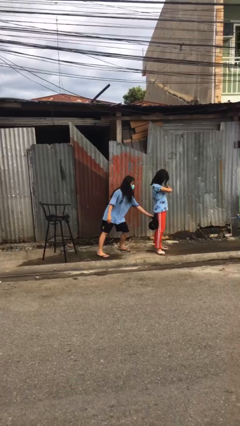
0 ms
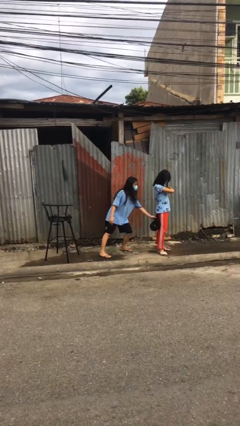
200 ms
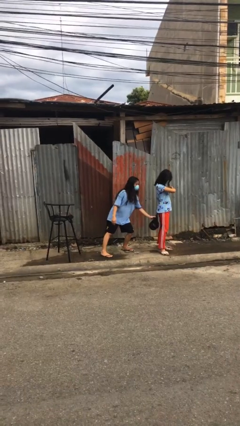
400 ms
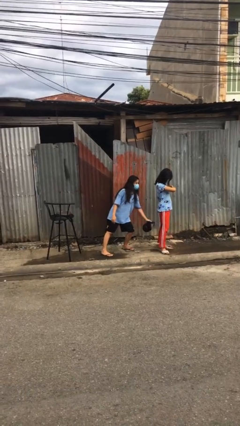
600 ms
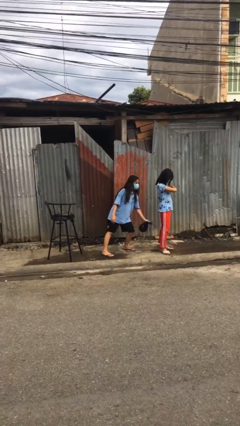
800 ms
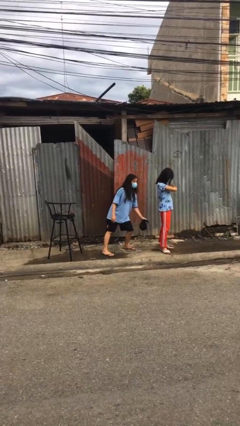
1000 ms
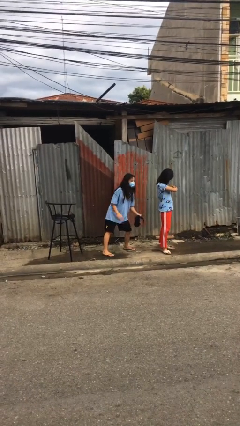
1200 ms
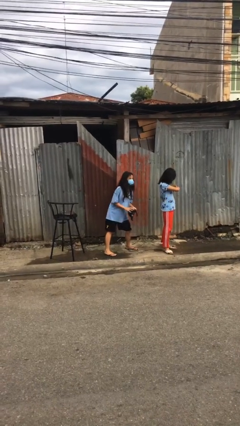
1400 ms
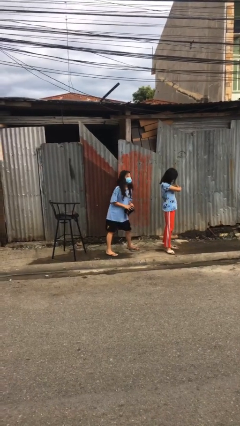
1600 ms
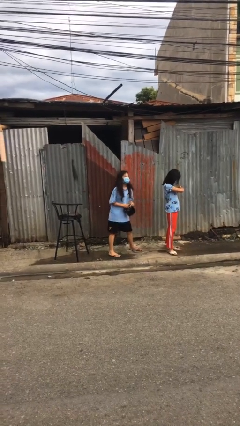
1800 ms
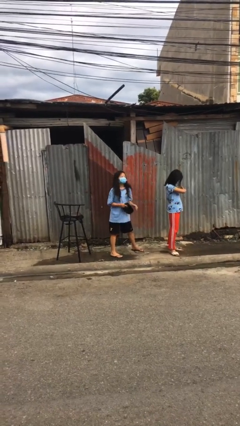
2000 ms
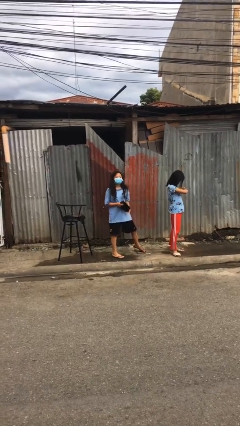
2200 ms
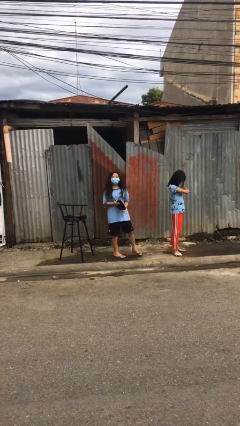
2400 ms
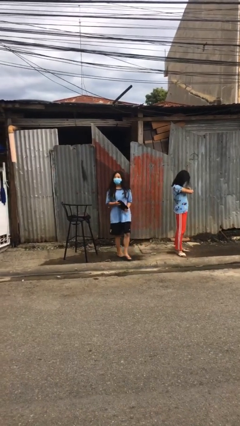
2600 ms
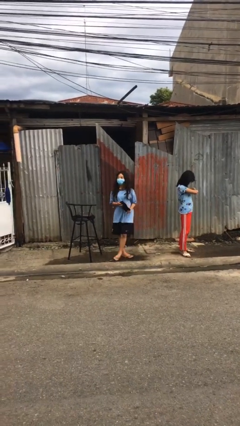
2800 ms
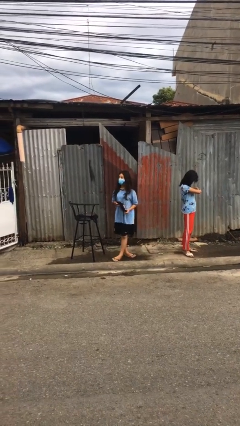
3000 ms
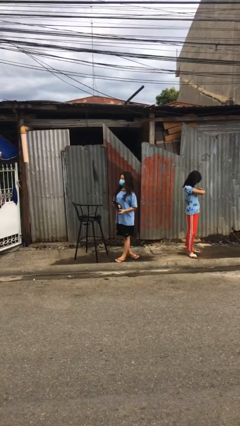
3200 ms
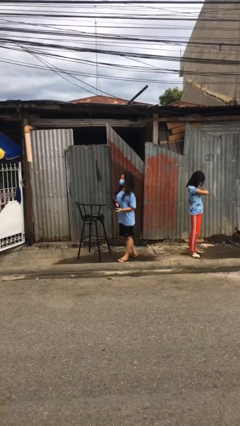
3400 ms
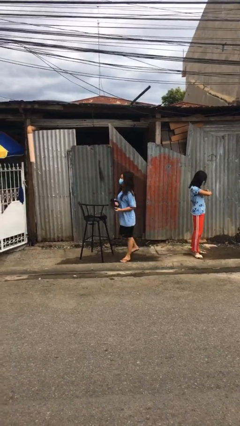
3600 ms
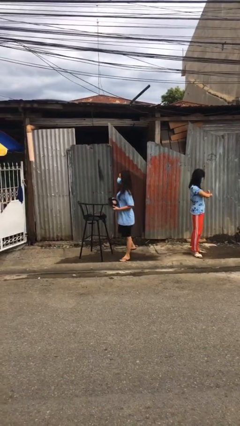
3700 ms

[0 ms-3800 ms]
person steals object from person

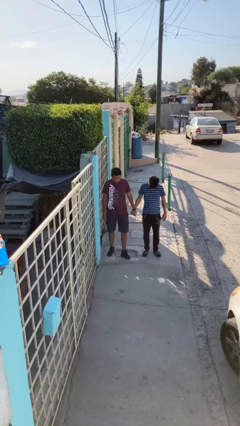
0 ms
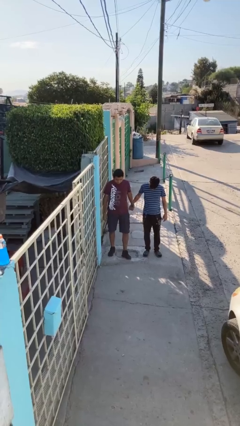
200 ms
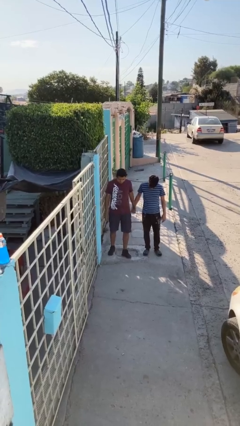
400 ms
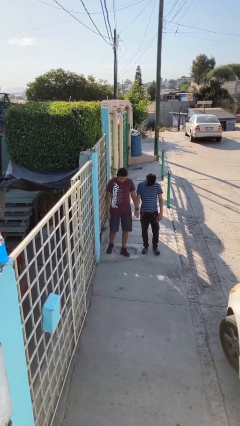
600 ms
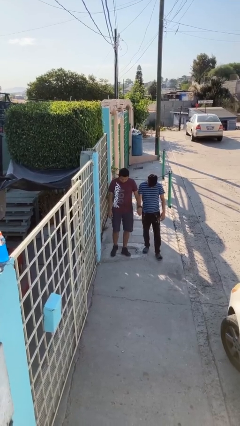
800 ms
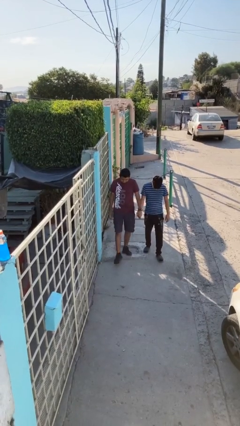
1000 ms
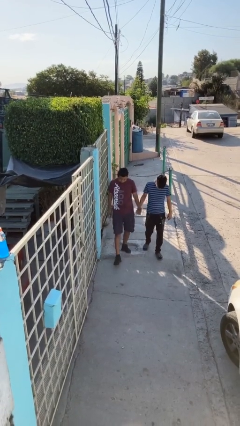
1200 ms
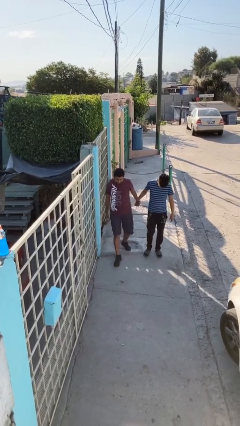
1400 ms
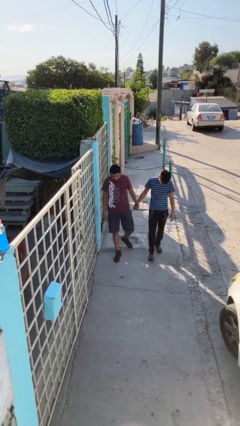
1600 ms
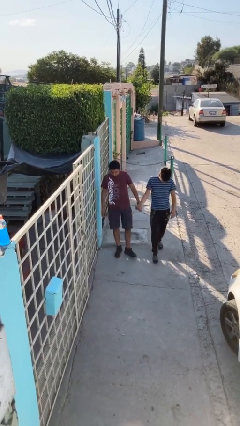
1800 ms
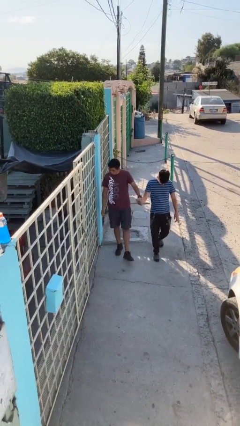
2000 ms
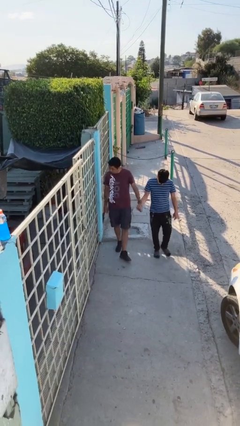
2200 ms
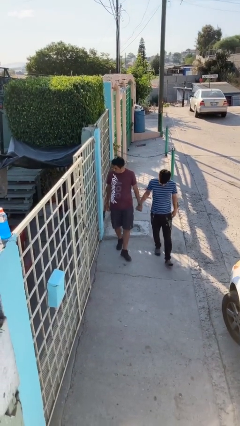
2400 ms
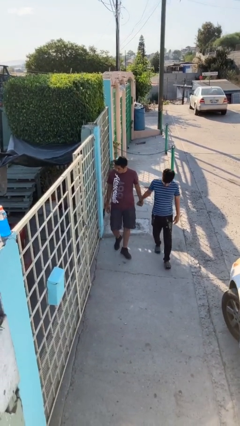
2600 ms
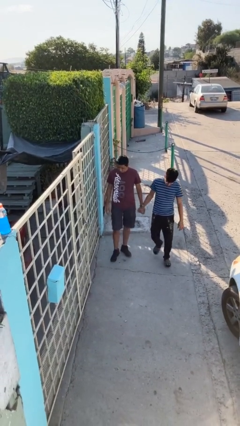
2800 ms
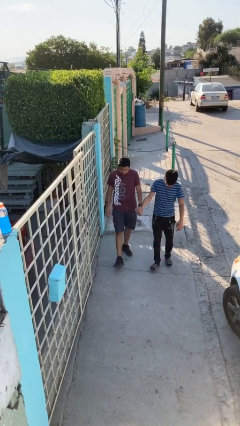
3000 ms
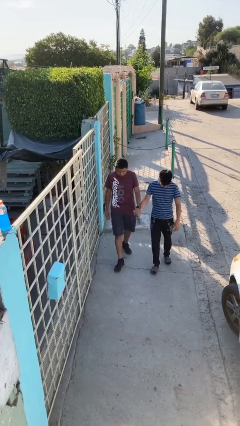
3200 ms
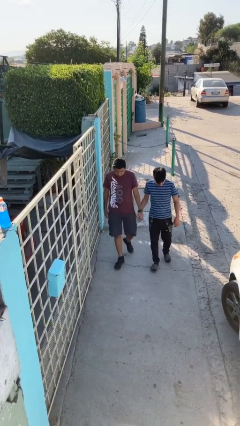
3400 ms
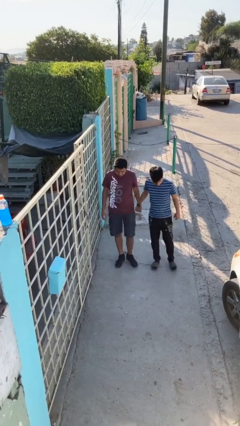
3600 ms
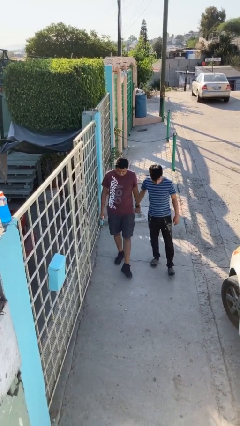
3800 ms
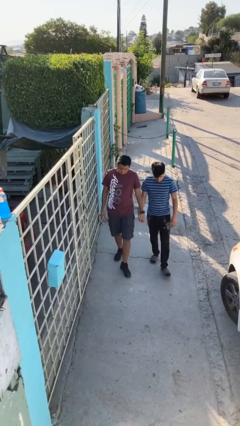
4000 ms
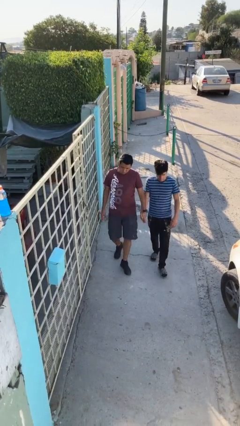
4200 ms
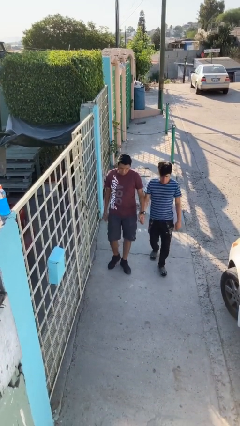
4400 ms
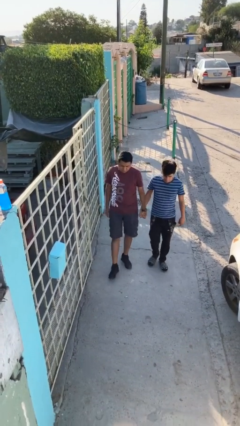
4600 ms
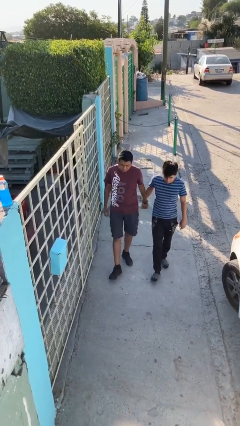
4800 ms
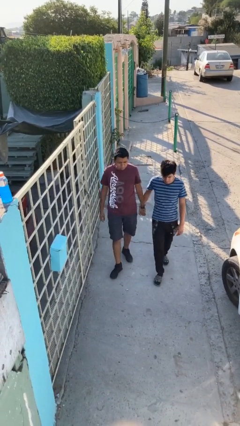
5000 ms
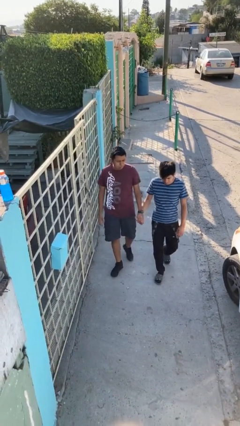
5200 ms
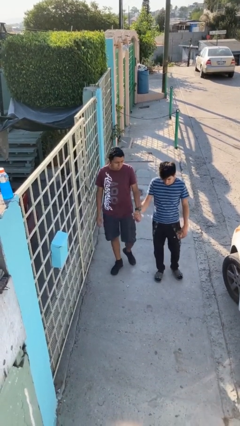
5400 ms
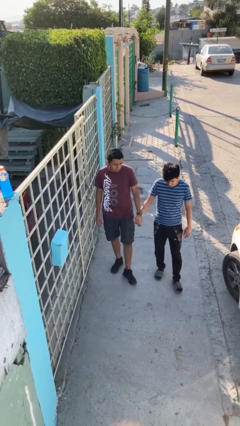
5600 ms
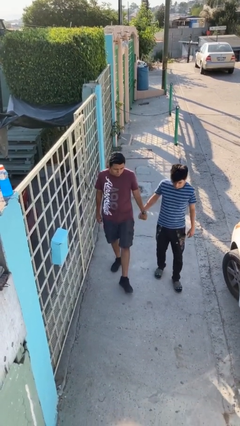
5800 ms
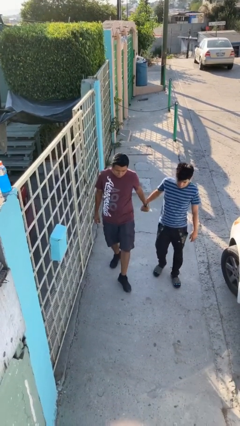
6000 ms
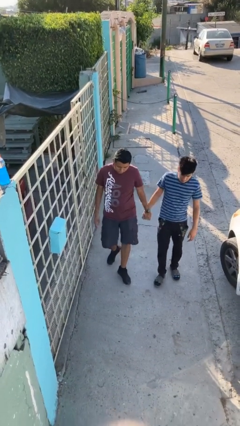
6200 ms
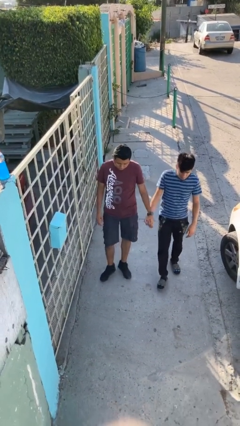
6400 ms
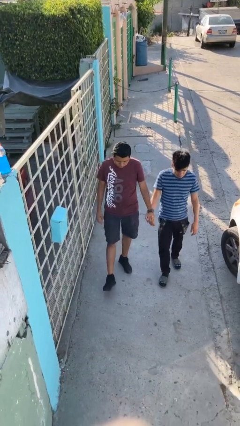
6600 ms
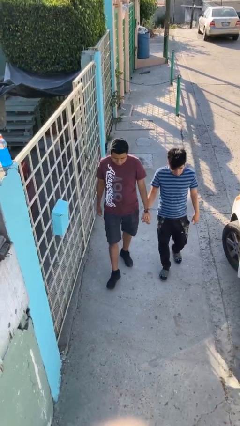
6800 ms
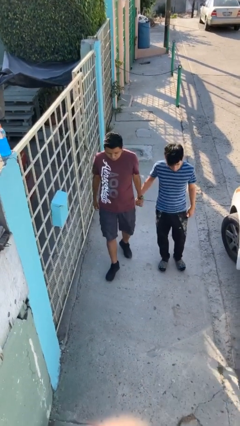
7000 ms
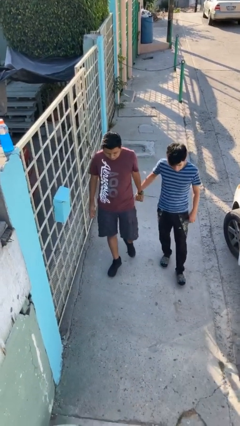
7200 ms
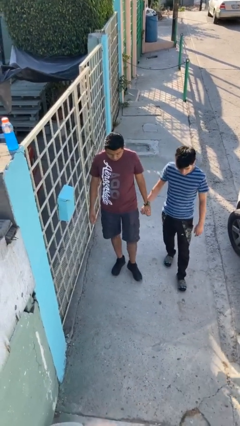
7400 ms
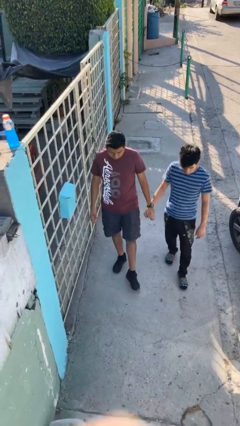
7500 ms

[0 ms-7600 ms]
person holds hand

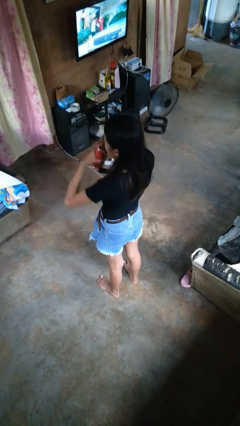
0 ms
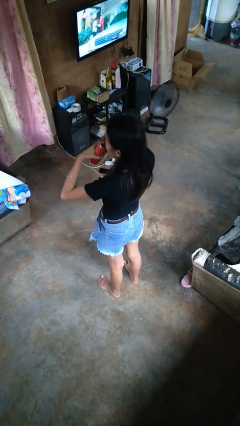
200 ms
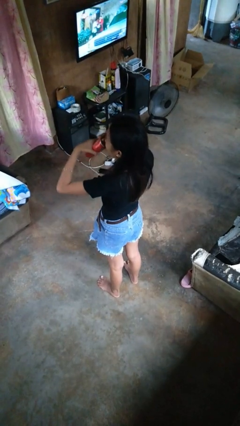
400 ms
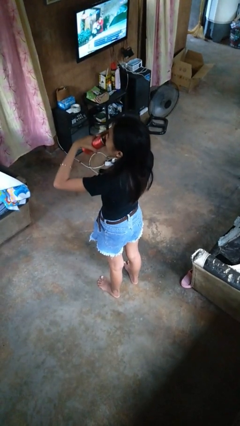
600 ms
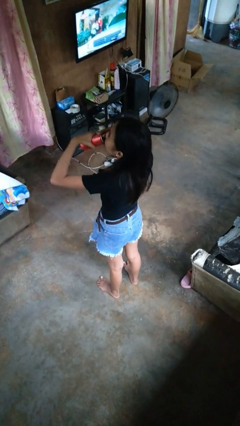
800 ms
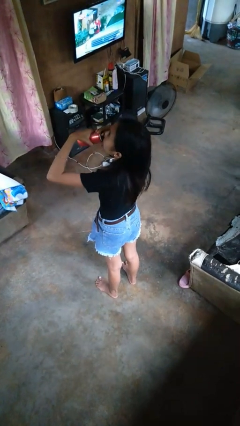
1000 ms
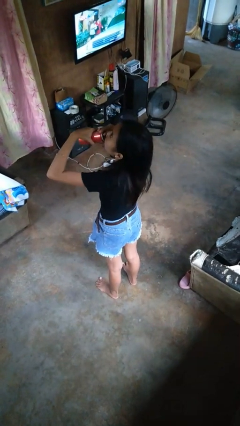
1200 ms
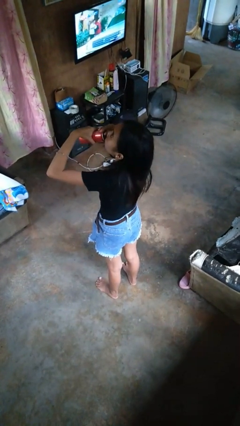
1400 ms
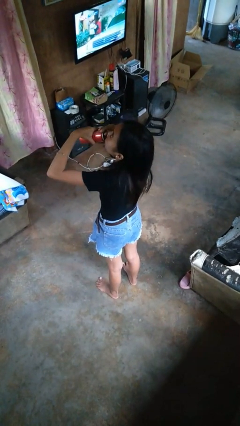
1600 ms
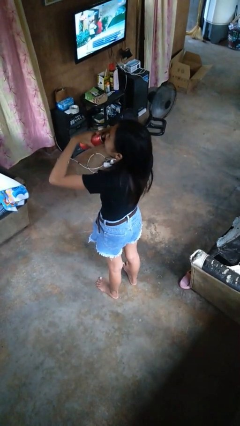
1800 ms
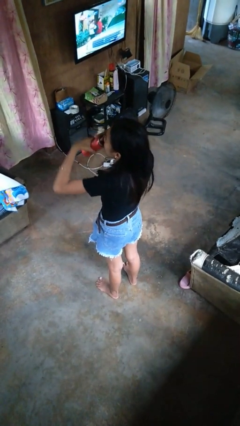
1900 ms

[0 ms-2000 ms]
person drinks from beverage can

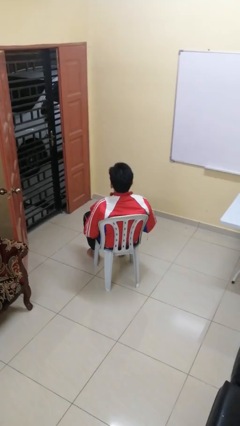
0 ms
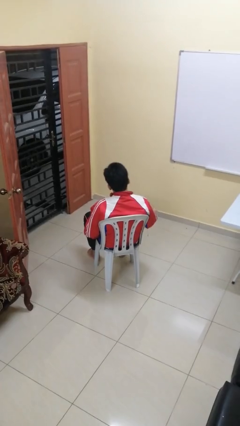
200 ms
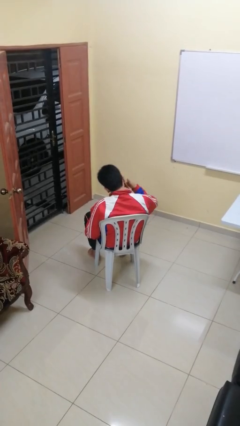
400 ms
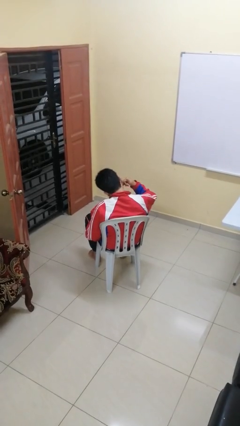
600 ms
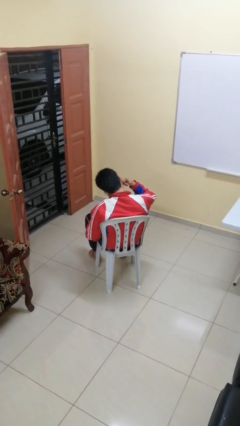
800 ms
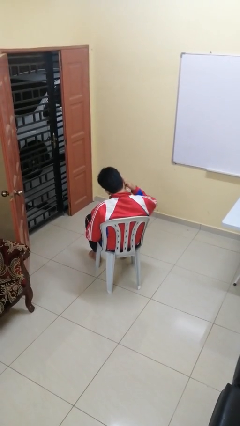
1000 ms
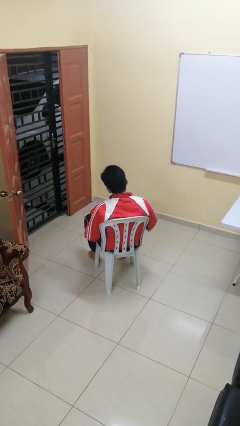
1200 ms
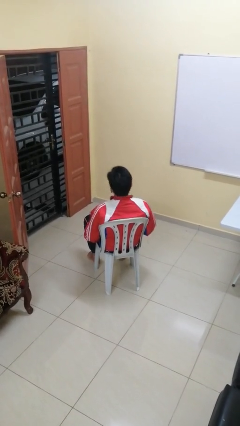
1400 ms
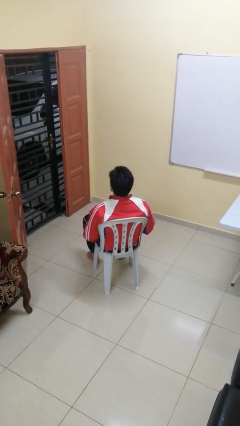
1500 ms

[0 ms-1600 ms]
person gestures call me

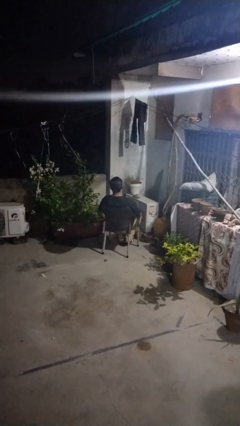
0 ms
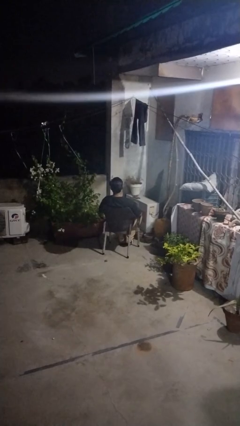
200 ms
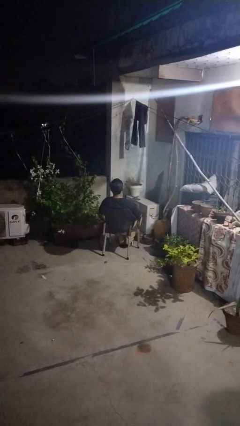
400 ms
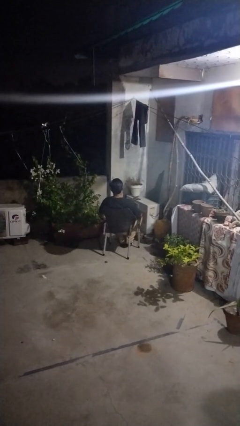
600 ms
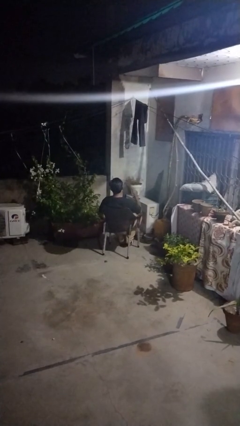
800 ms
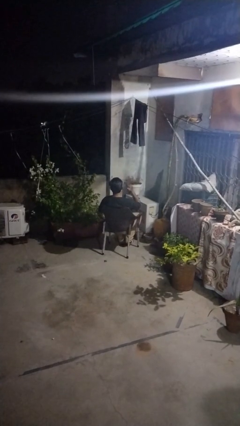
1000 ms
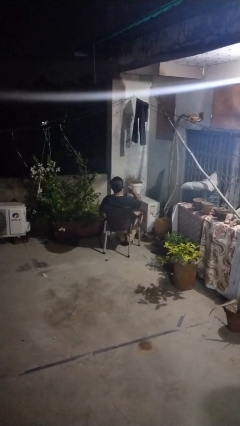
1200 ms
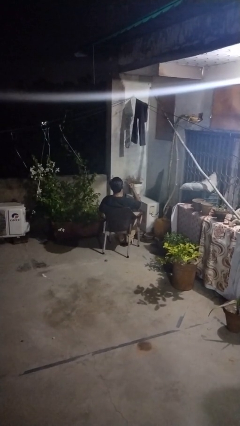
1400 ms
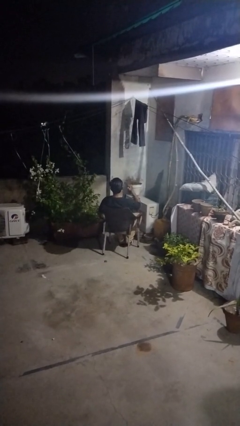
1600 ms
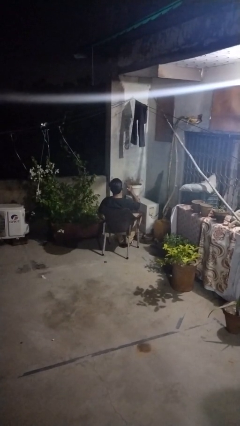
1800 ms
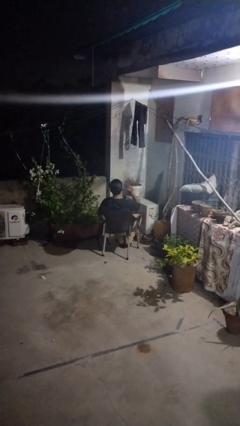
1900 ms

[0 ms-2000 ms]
person gestures behind me

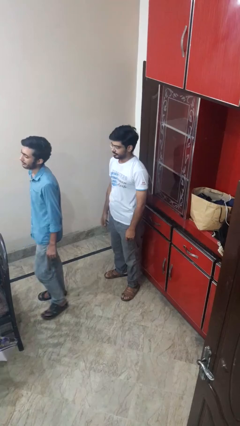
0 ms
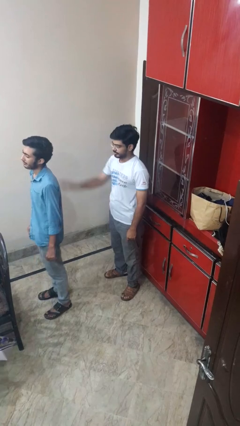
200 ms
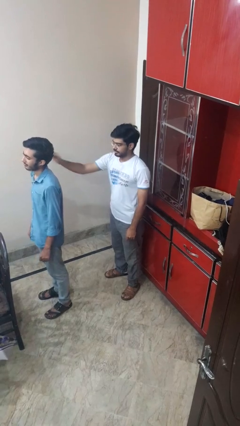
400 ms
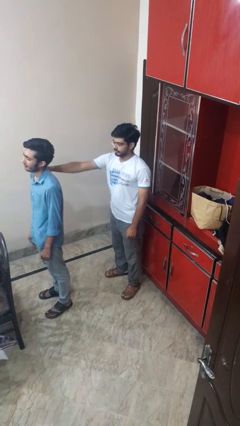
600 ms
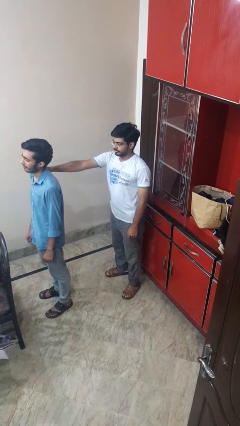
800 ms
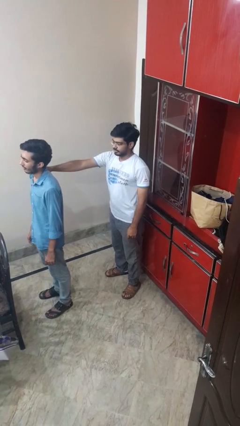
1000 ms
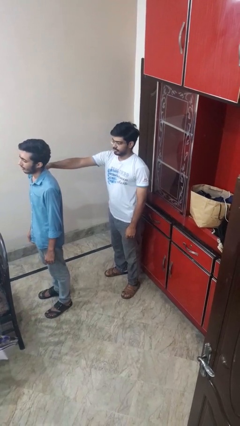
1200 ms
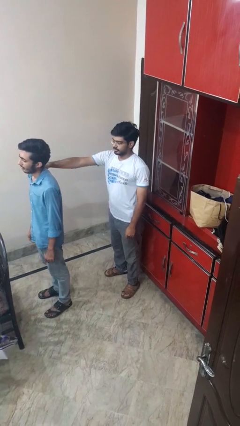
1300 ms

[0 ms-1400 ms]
person grabs person by shoulder
